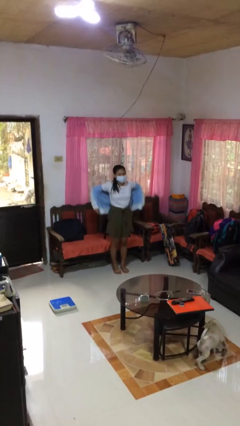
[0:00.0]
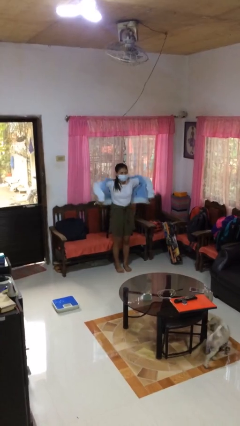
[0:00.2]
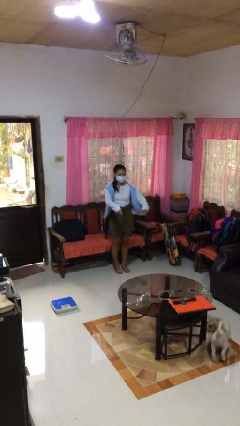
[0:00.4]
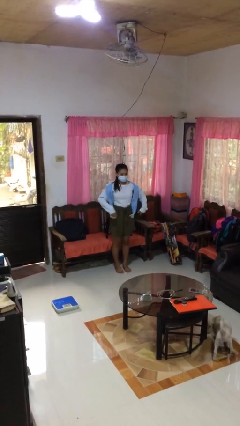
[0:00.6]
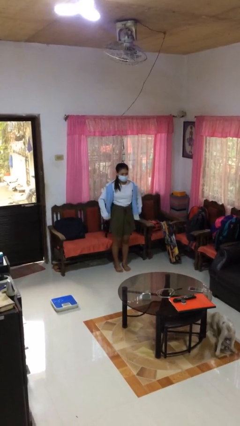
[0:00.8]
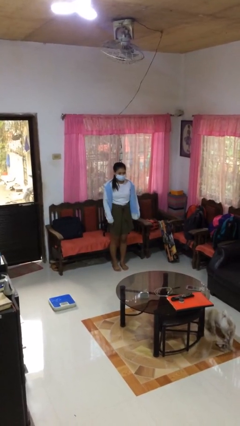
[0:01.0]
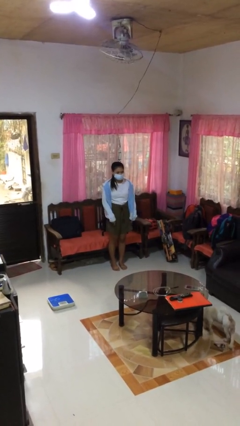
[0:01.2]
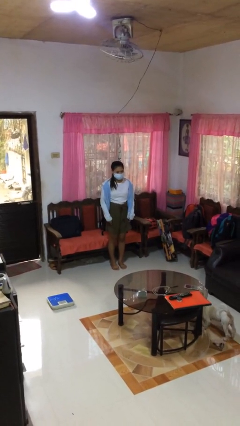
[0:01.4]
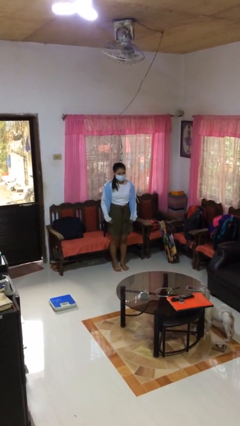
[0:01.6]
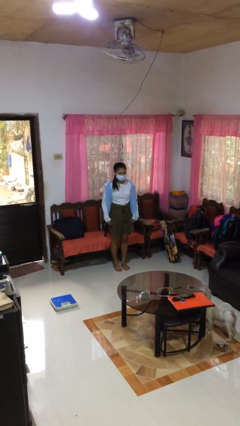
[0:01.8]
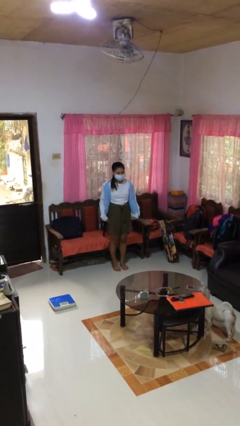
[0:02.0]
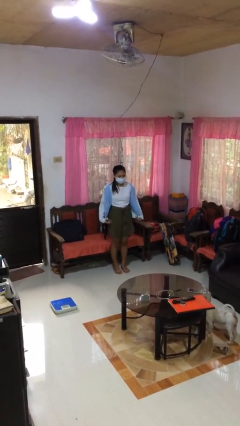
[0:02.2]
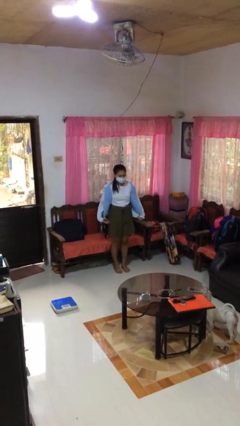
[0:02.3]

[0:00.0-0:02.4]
person puts on jacket

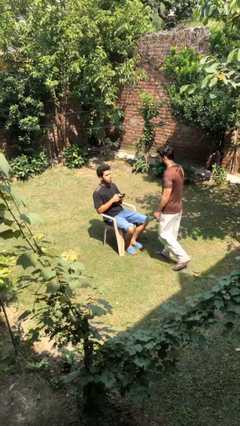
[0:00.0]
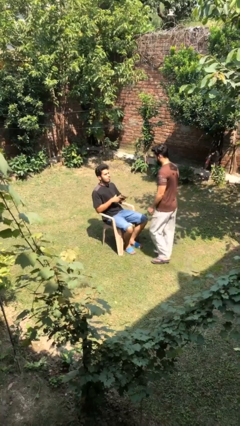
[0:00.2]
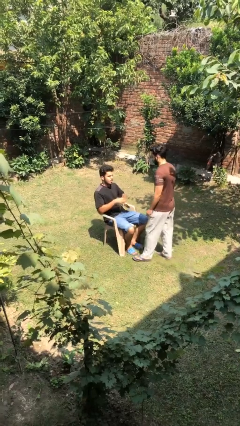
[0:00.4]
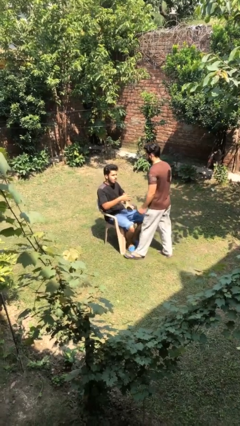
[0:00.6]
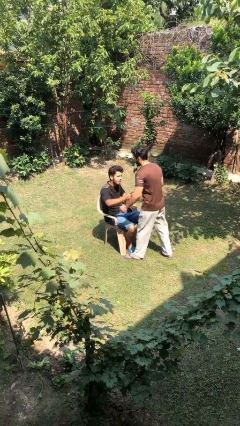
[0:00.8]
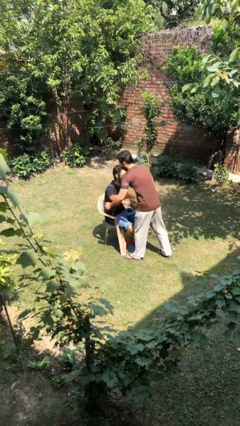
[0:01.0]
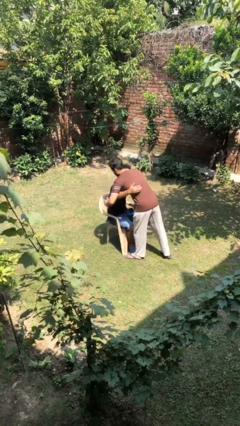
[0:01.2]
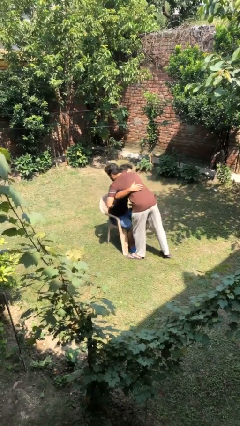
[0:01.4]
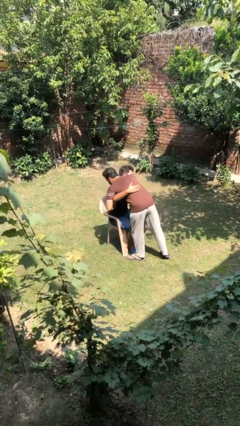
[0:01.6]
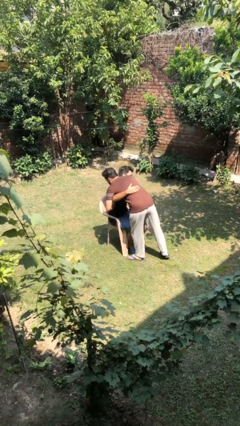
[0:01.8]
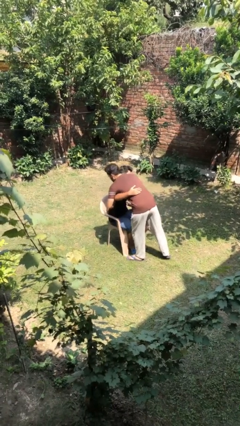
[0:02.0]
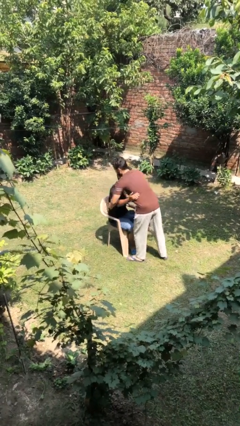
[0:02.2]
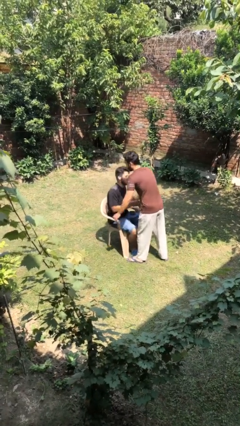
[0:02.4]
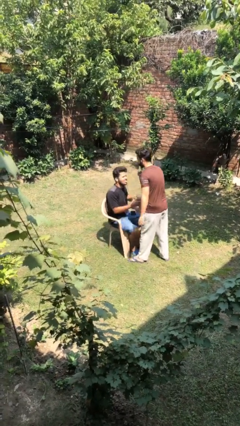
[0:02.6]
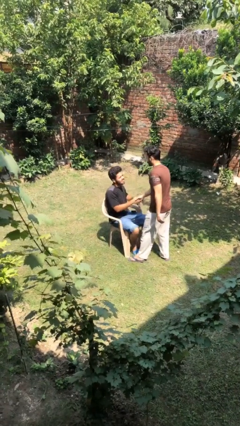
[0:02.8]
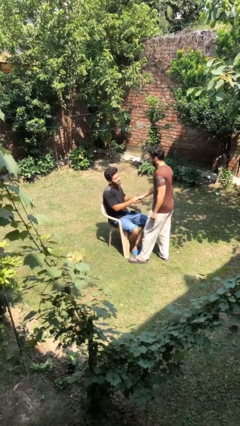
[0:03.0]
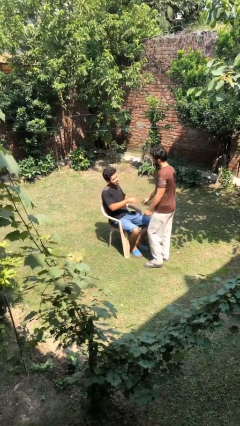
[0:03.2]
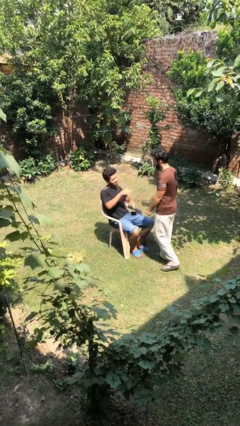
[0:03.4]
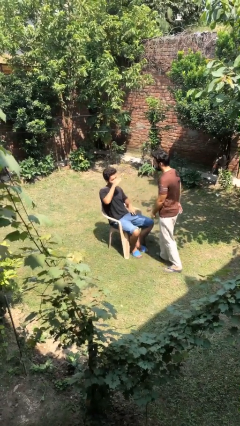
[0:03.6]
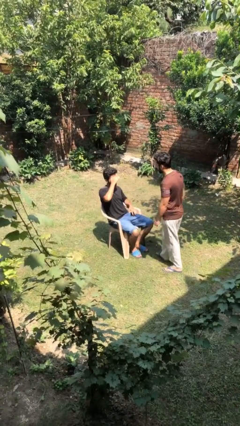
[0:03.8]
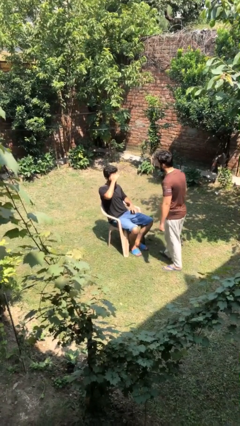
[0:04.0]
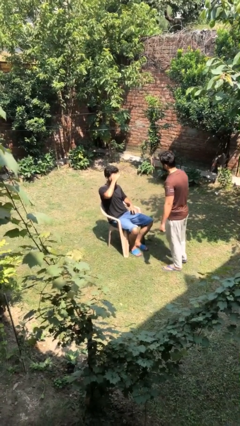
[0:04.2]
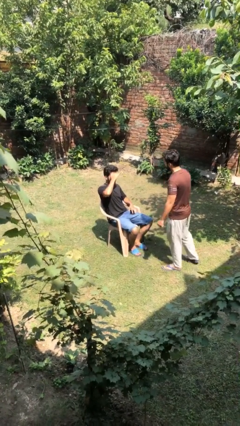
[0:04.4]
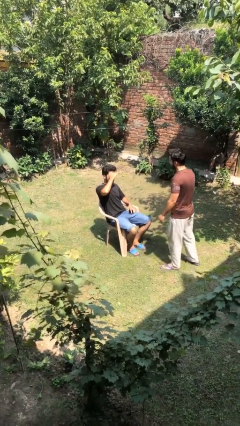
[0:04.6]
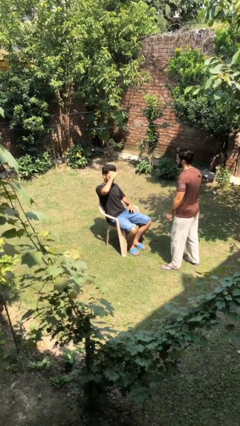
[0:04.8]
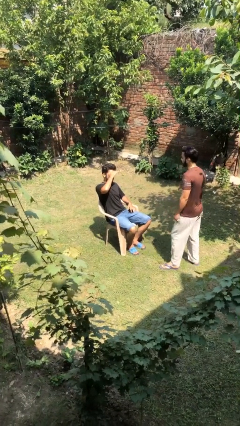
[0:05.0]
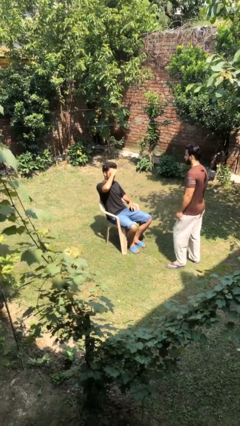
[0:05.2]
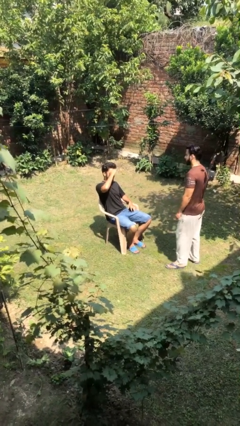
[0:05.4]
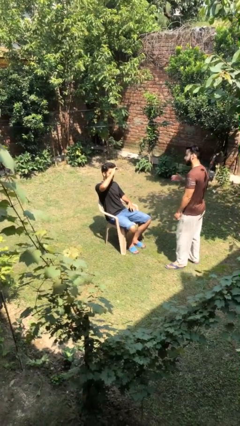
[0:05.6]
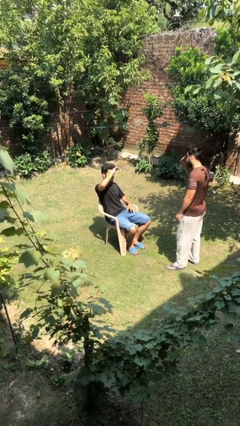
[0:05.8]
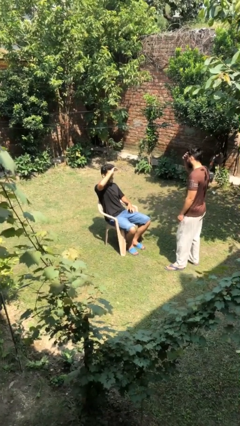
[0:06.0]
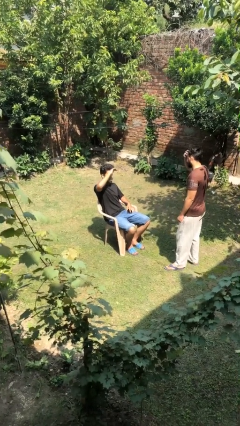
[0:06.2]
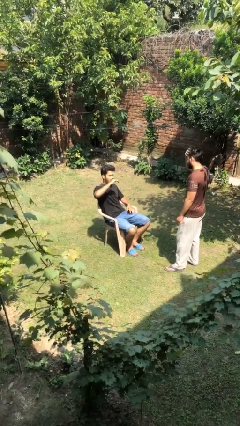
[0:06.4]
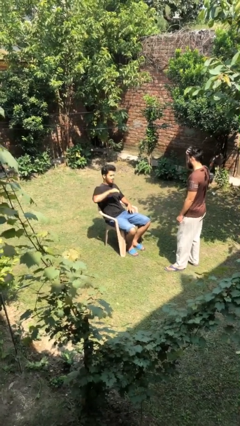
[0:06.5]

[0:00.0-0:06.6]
person embraces person

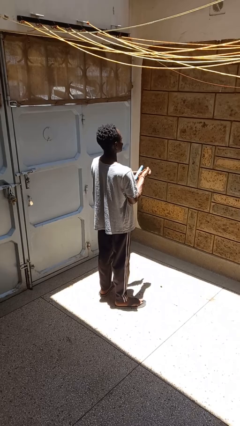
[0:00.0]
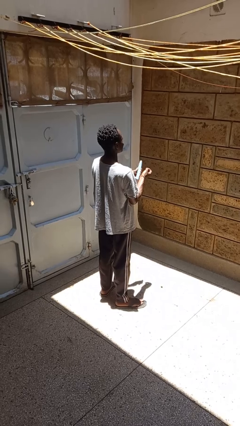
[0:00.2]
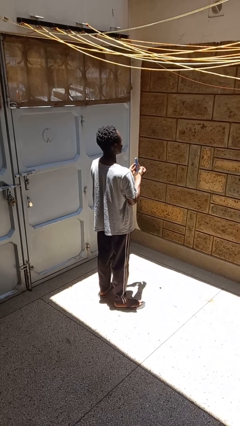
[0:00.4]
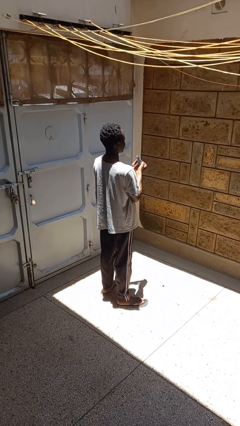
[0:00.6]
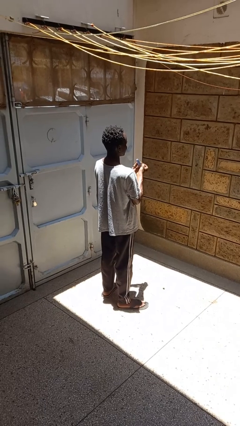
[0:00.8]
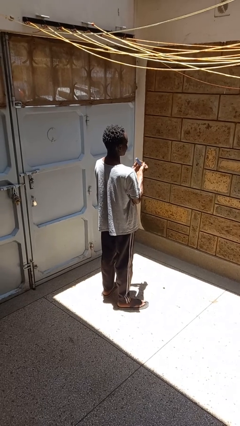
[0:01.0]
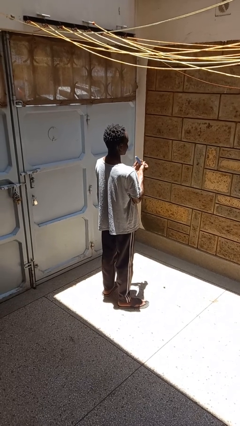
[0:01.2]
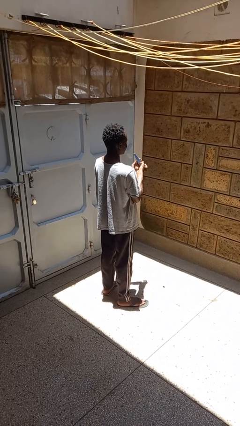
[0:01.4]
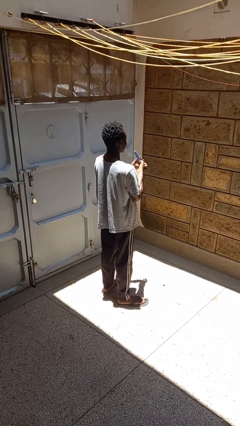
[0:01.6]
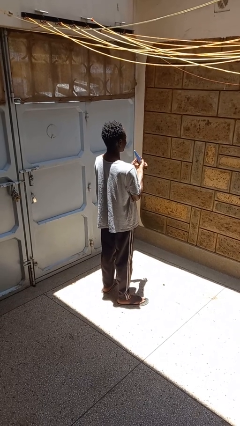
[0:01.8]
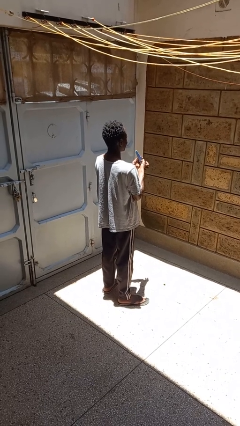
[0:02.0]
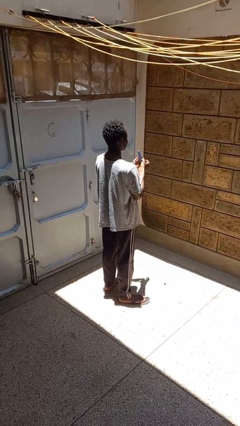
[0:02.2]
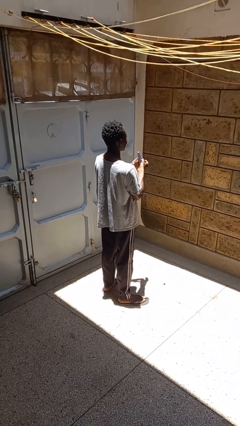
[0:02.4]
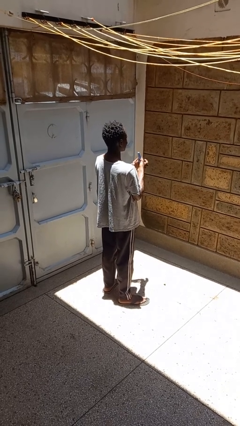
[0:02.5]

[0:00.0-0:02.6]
person files fingernails

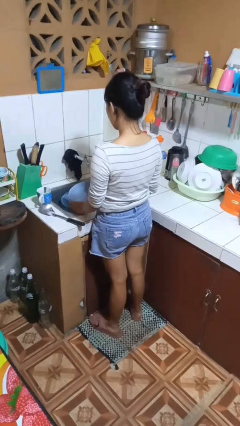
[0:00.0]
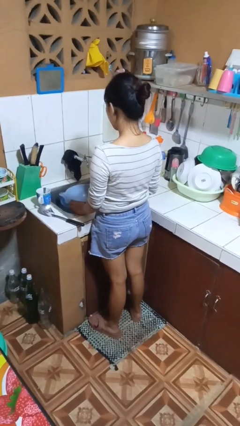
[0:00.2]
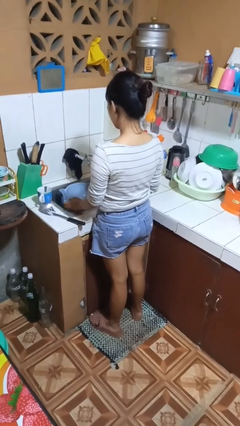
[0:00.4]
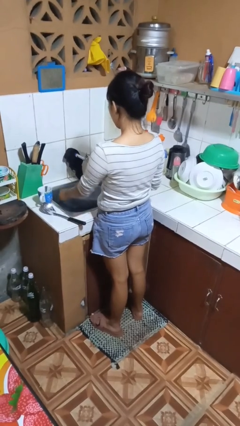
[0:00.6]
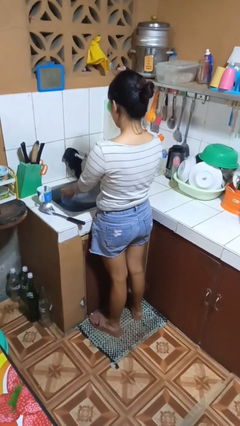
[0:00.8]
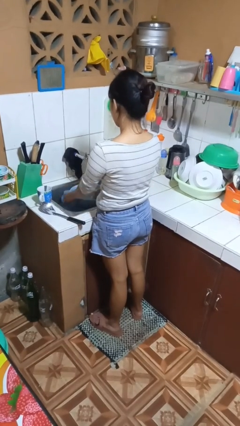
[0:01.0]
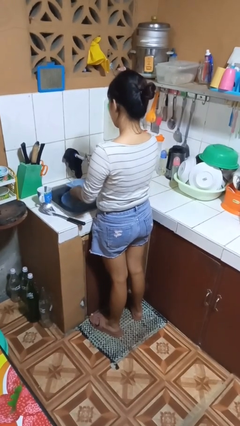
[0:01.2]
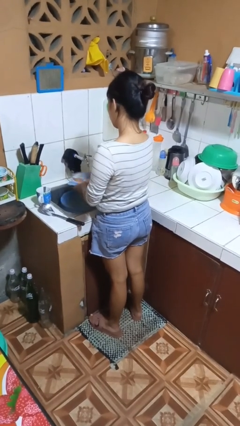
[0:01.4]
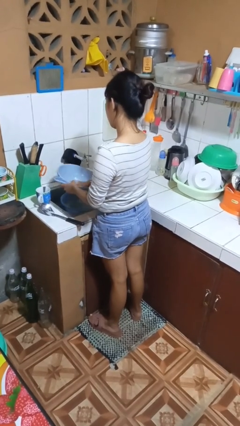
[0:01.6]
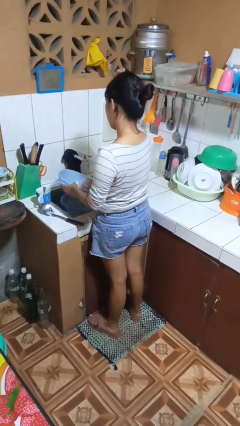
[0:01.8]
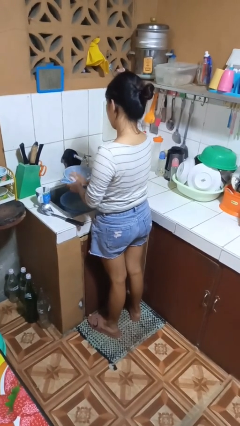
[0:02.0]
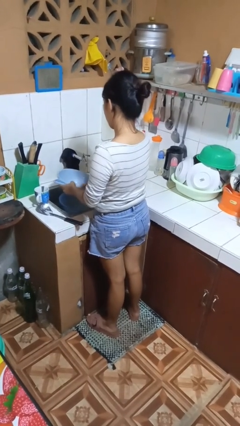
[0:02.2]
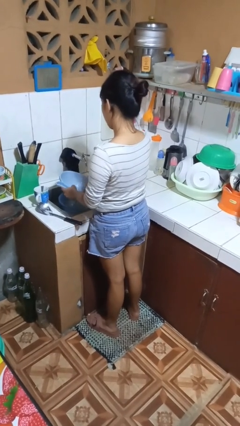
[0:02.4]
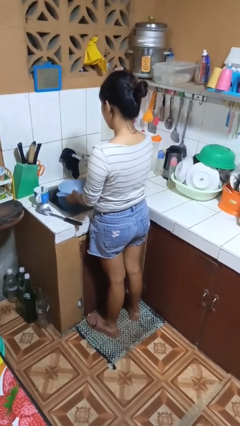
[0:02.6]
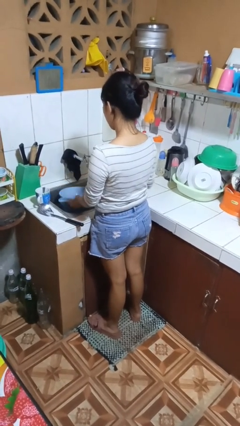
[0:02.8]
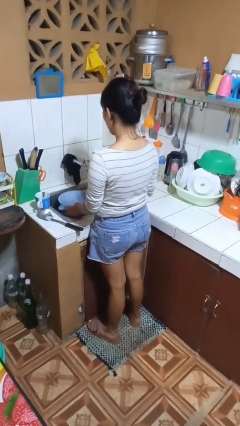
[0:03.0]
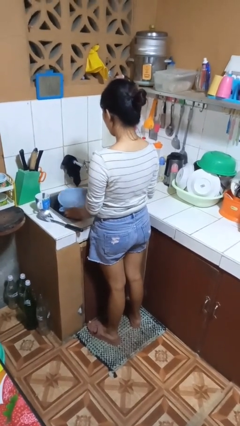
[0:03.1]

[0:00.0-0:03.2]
person washes dish

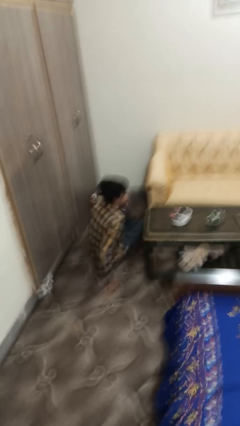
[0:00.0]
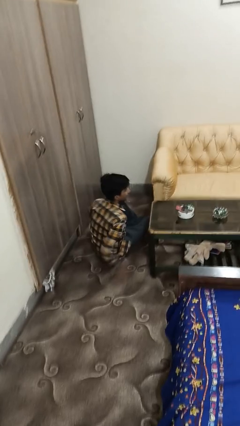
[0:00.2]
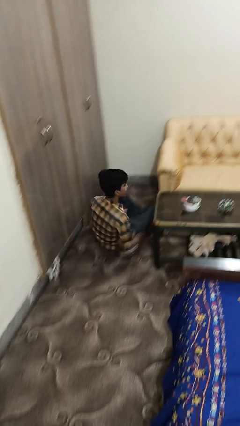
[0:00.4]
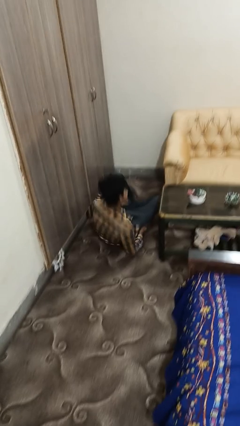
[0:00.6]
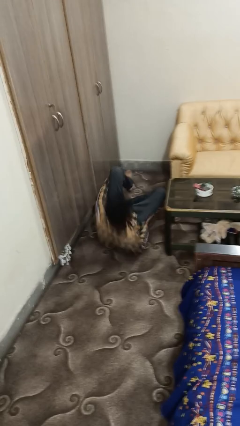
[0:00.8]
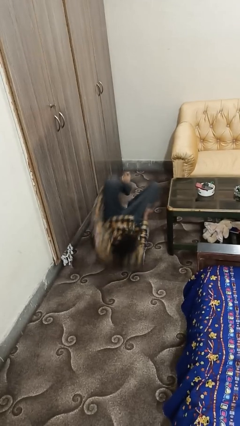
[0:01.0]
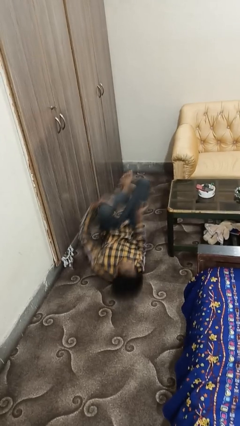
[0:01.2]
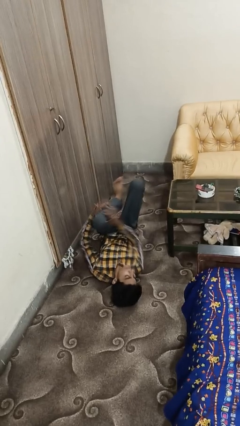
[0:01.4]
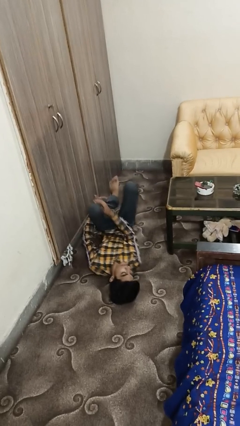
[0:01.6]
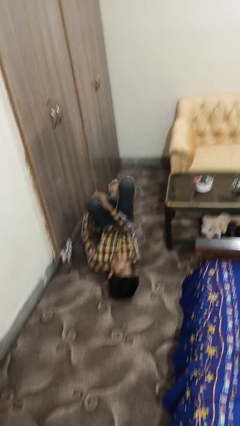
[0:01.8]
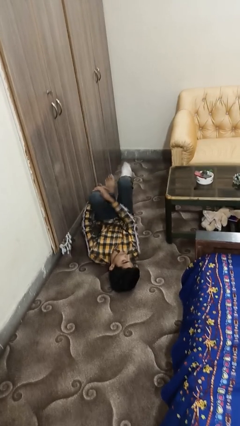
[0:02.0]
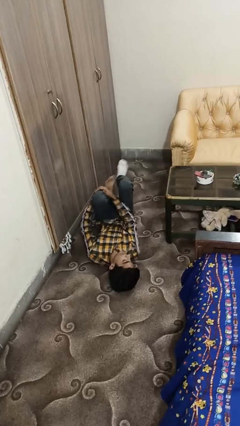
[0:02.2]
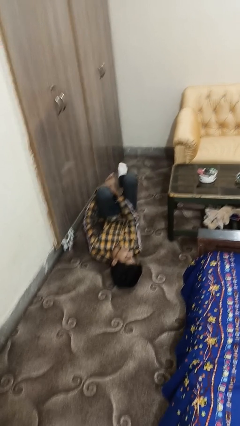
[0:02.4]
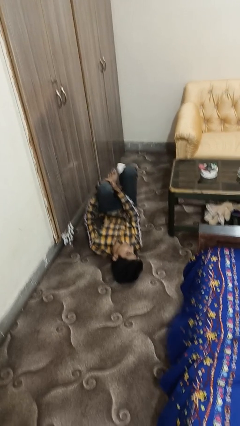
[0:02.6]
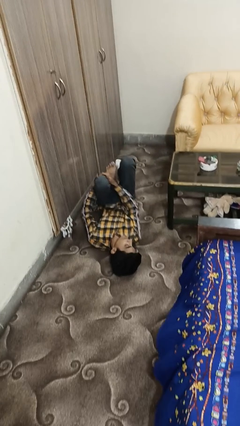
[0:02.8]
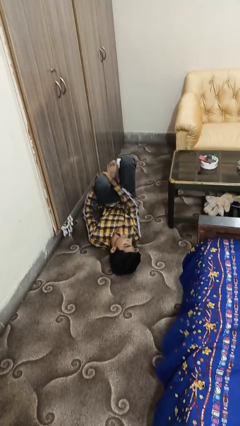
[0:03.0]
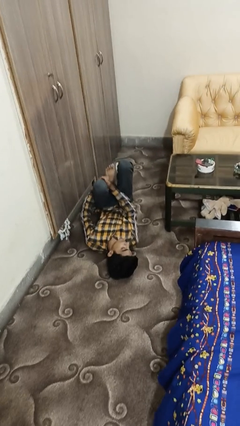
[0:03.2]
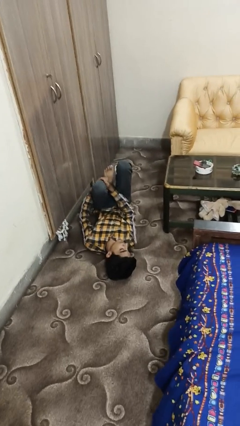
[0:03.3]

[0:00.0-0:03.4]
person lies down on floor
